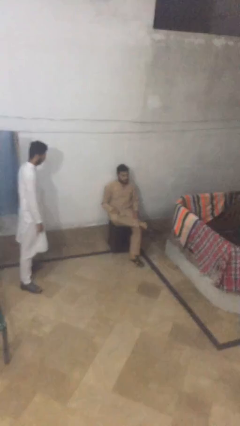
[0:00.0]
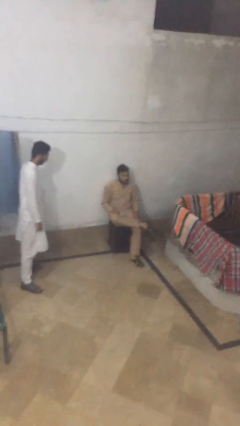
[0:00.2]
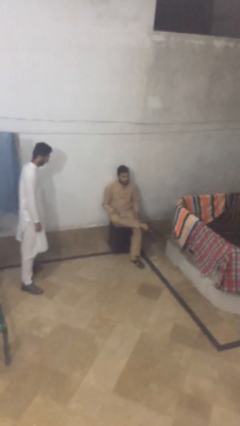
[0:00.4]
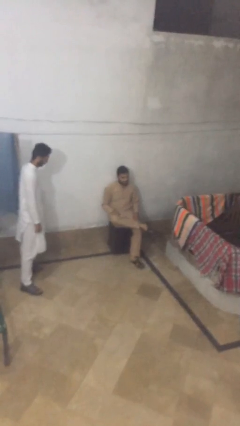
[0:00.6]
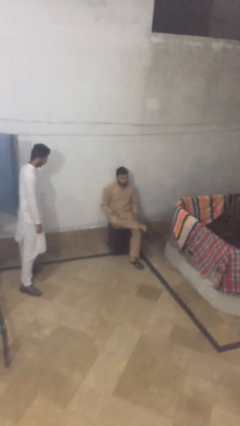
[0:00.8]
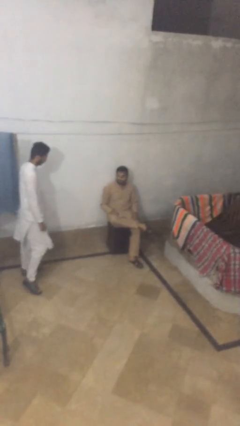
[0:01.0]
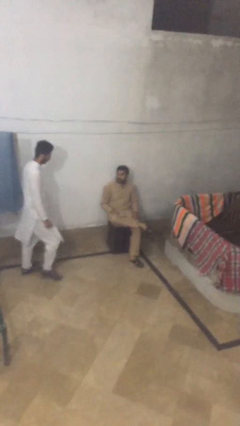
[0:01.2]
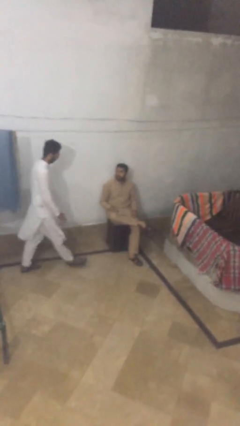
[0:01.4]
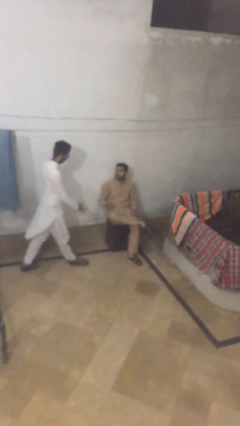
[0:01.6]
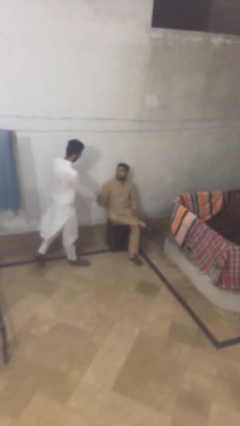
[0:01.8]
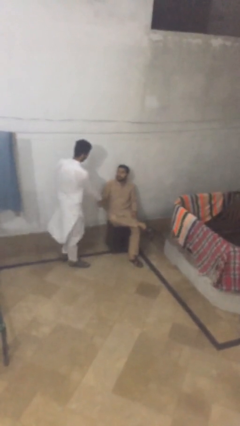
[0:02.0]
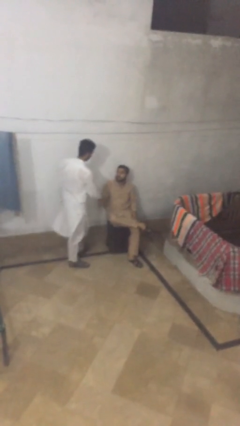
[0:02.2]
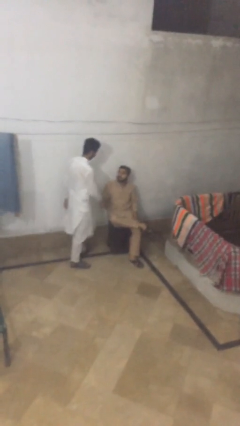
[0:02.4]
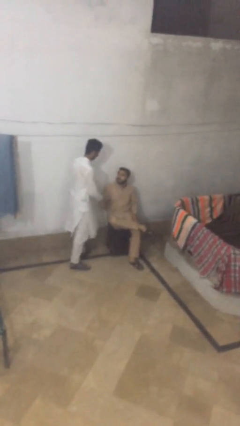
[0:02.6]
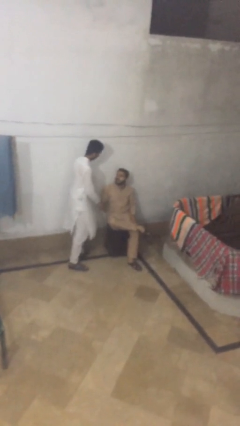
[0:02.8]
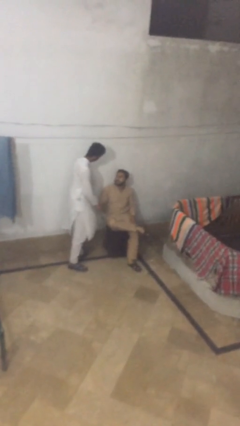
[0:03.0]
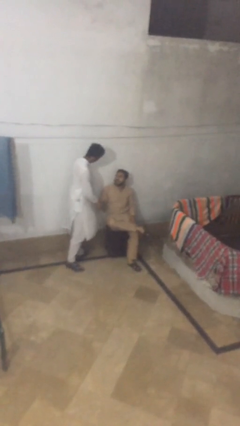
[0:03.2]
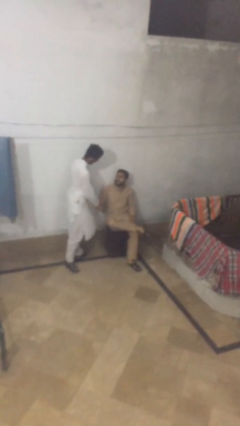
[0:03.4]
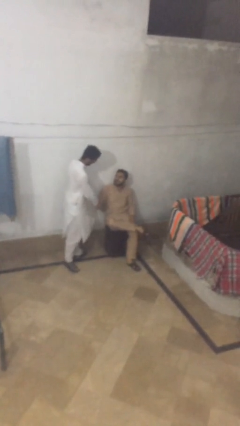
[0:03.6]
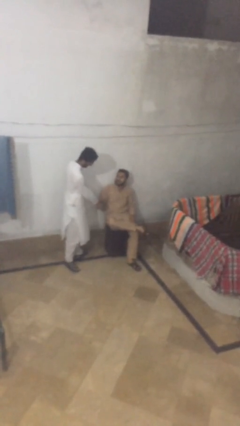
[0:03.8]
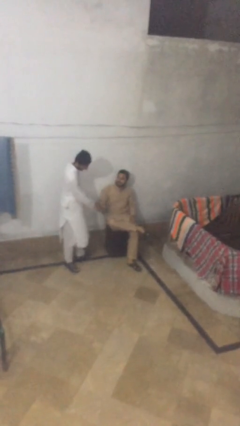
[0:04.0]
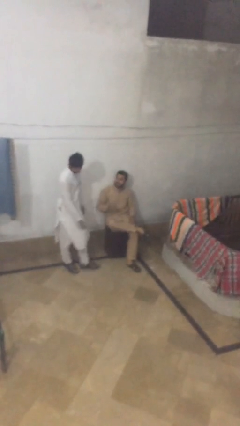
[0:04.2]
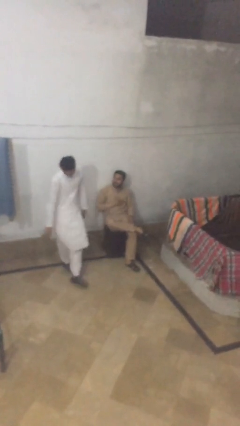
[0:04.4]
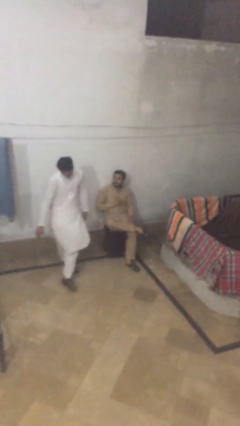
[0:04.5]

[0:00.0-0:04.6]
person shakes hand

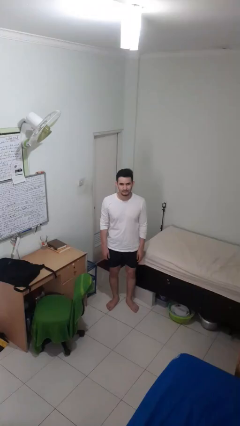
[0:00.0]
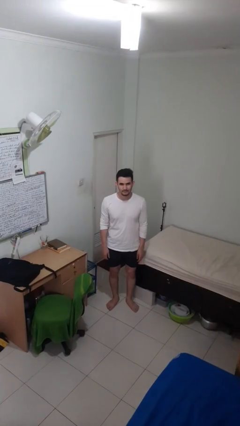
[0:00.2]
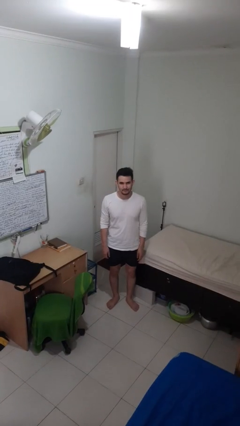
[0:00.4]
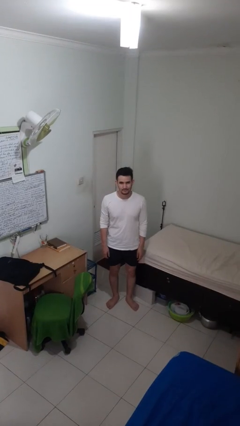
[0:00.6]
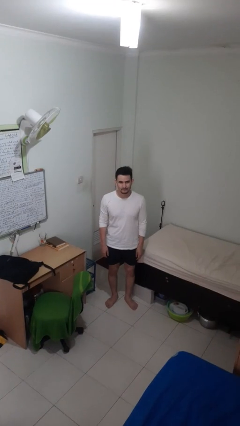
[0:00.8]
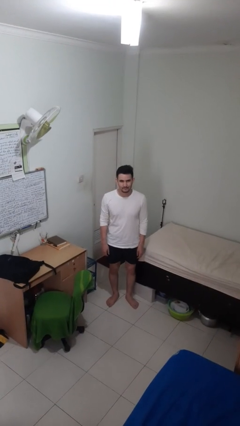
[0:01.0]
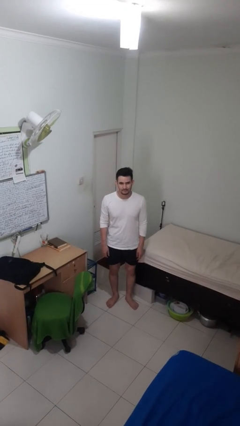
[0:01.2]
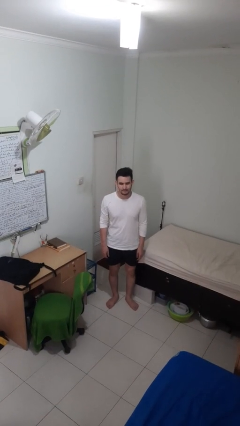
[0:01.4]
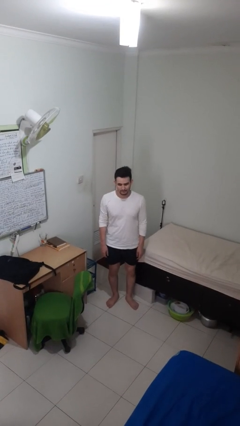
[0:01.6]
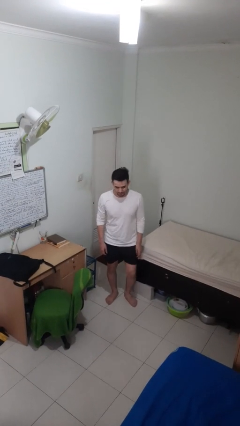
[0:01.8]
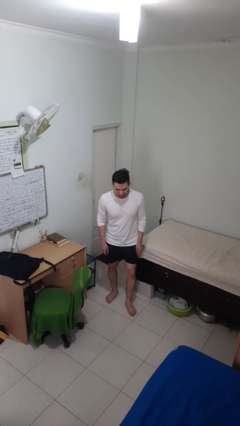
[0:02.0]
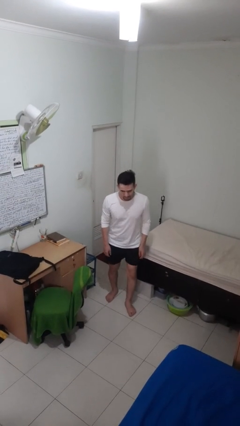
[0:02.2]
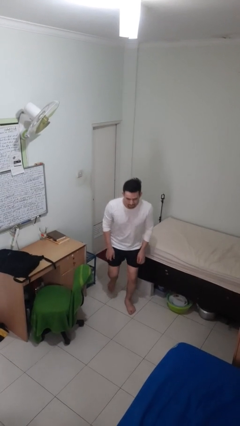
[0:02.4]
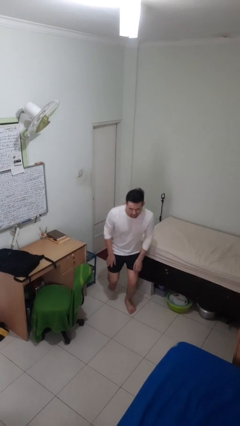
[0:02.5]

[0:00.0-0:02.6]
person kneels

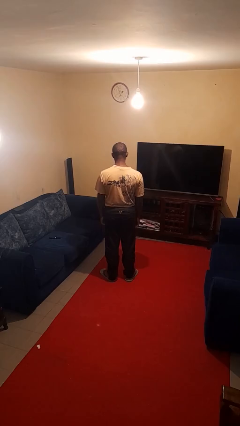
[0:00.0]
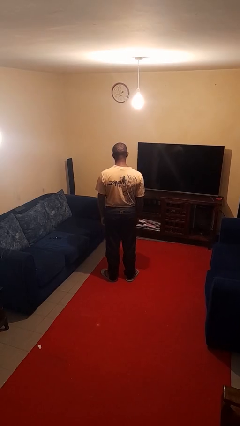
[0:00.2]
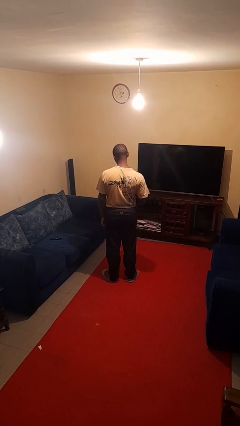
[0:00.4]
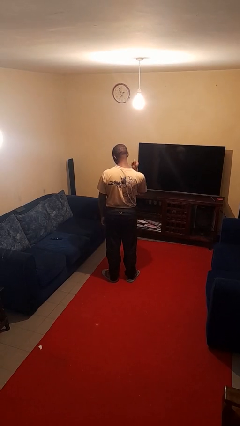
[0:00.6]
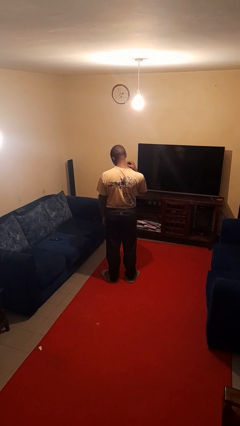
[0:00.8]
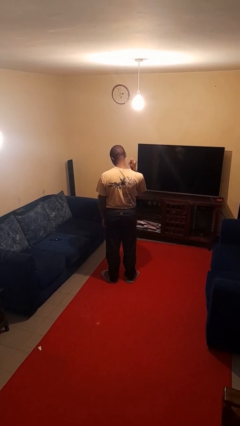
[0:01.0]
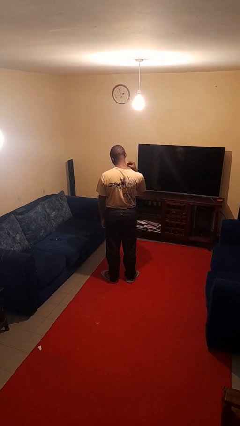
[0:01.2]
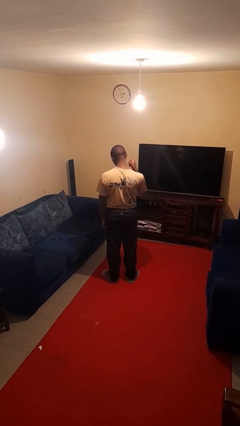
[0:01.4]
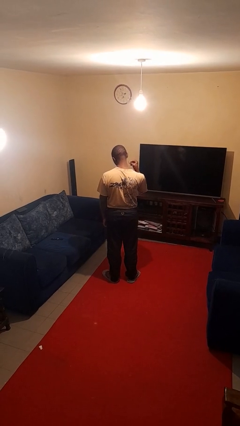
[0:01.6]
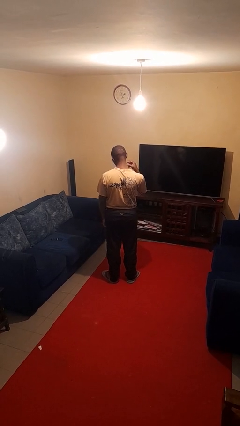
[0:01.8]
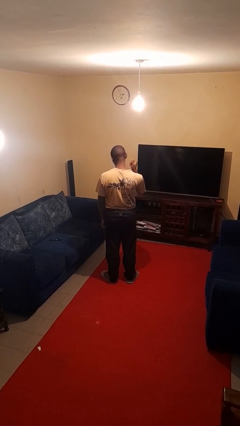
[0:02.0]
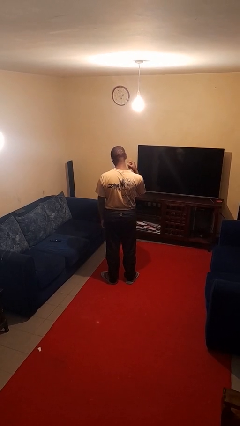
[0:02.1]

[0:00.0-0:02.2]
person snaps fingers

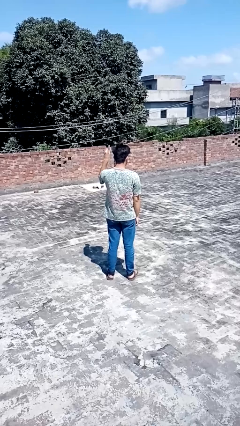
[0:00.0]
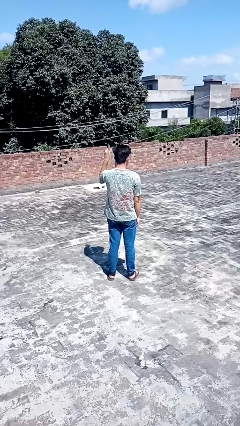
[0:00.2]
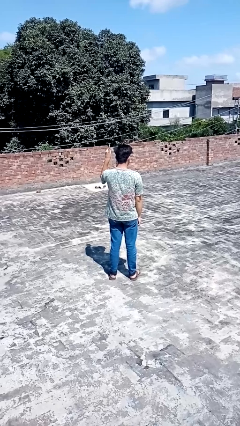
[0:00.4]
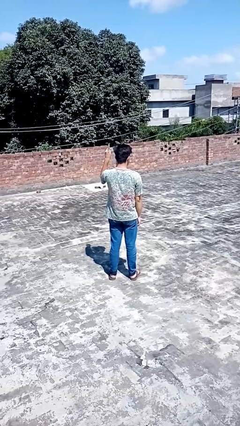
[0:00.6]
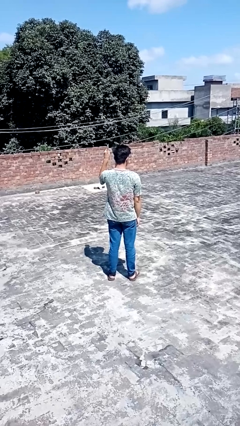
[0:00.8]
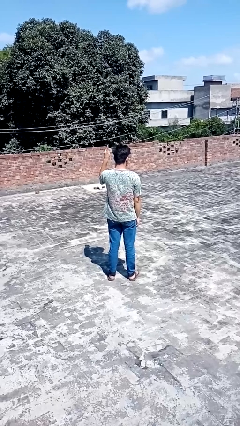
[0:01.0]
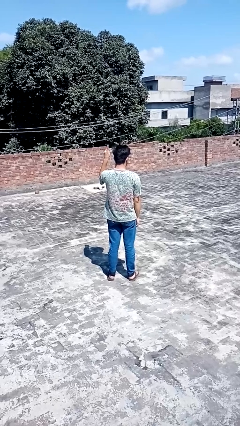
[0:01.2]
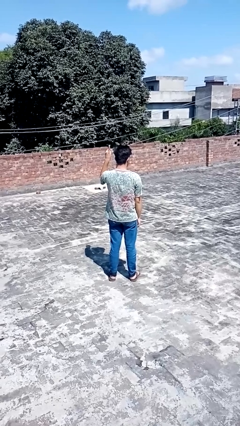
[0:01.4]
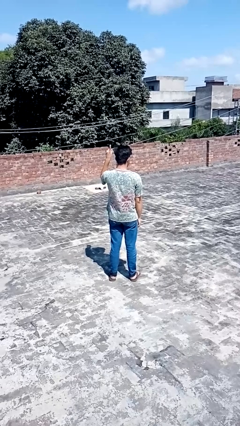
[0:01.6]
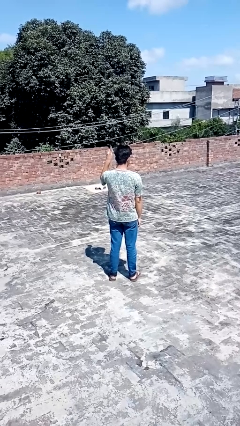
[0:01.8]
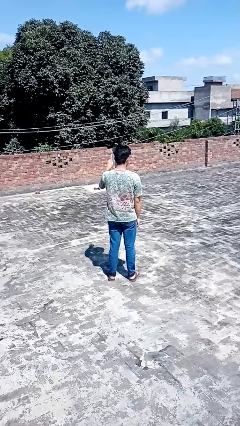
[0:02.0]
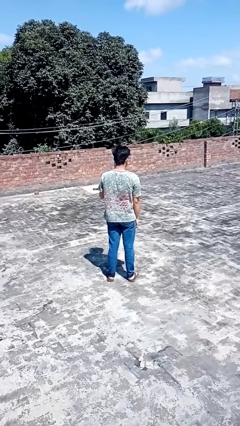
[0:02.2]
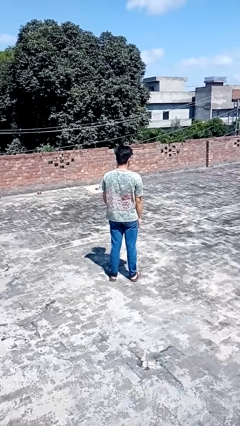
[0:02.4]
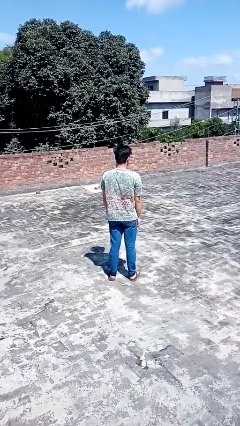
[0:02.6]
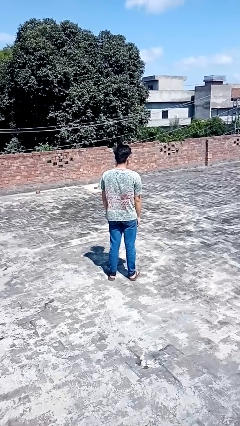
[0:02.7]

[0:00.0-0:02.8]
person gestures number one

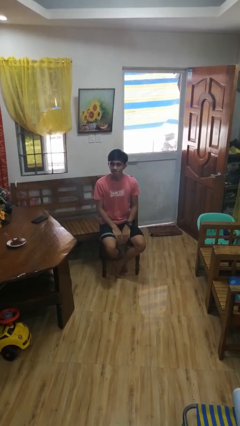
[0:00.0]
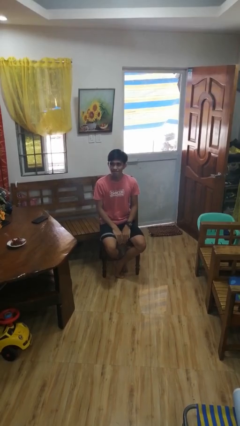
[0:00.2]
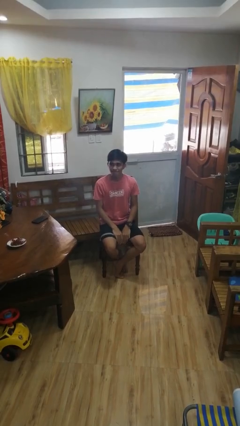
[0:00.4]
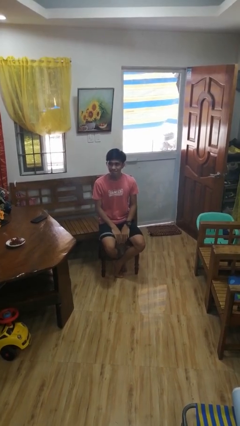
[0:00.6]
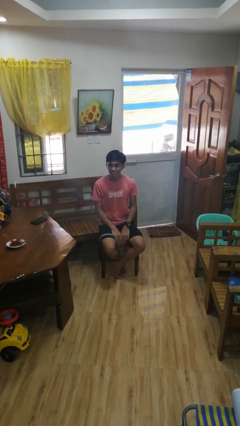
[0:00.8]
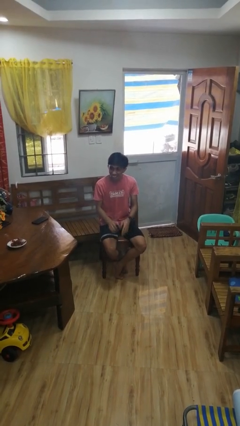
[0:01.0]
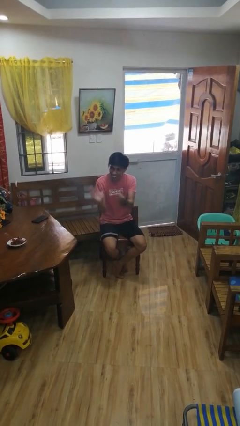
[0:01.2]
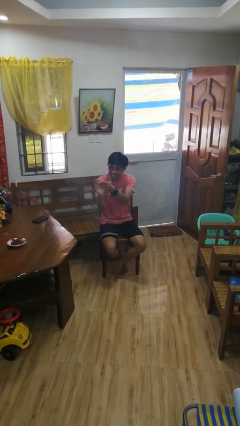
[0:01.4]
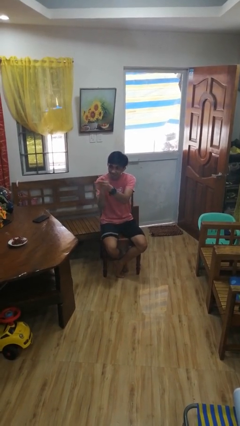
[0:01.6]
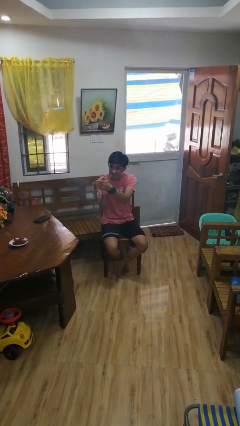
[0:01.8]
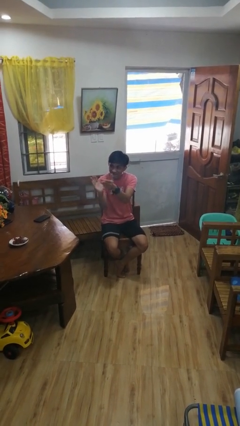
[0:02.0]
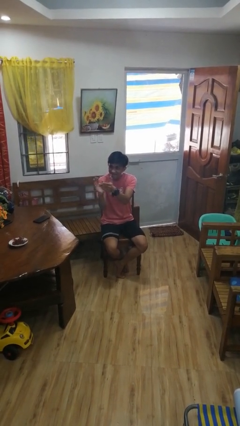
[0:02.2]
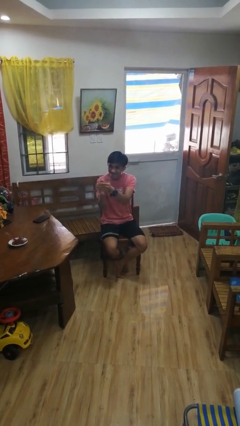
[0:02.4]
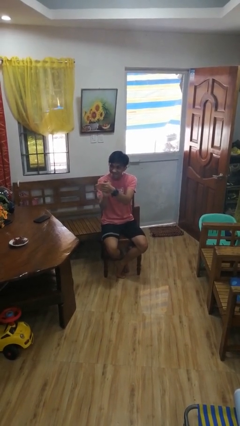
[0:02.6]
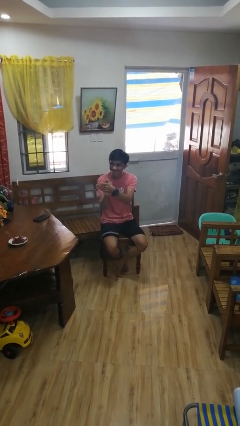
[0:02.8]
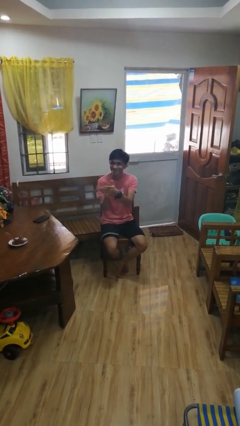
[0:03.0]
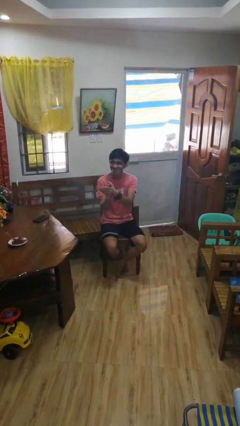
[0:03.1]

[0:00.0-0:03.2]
person claps hands

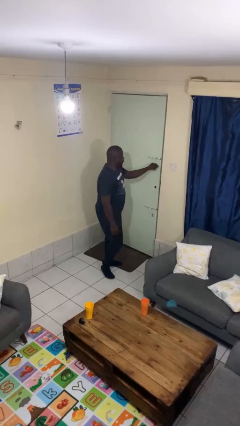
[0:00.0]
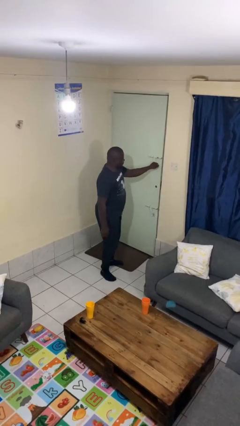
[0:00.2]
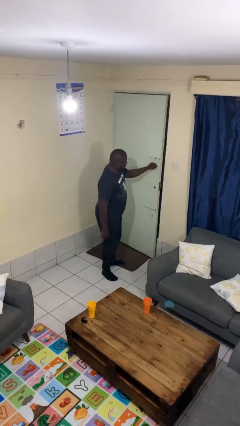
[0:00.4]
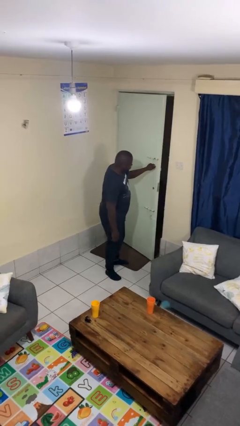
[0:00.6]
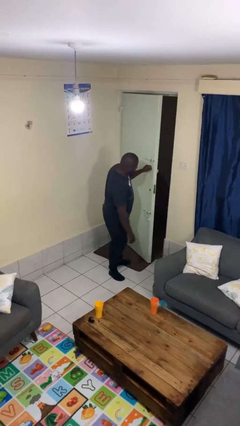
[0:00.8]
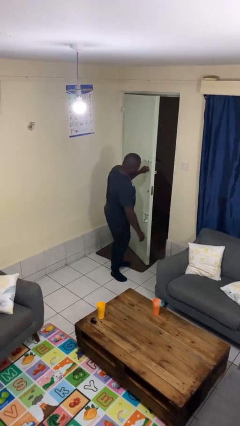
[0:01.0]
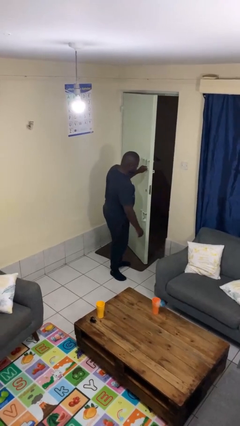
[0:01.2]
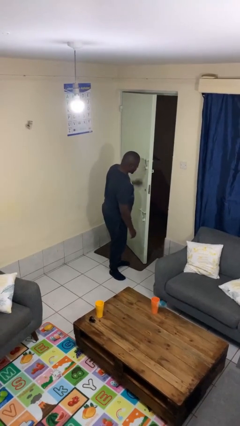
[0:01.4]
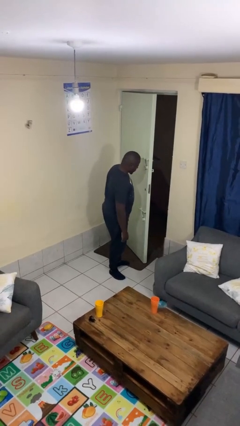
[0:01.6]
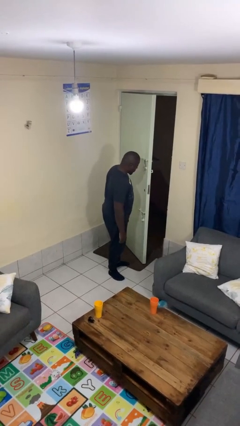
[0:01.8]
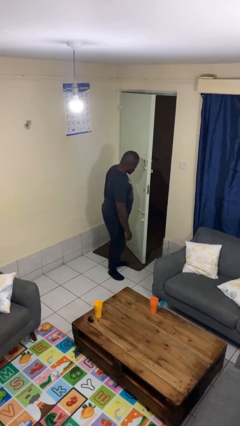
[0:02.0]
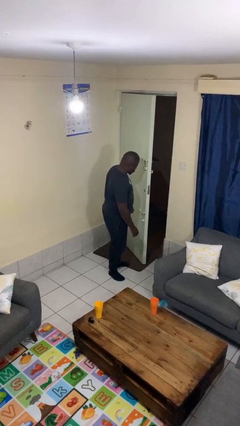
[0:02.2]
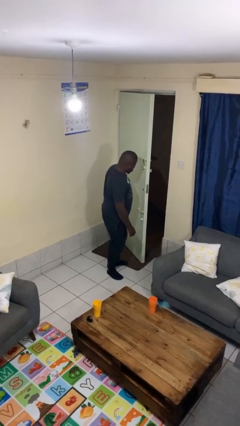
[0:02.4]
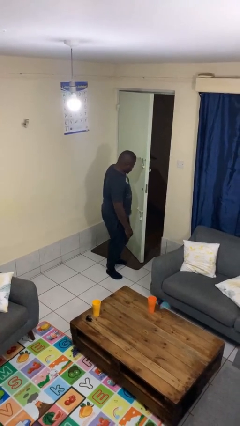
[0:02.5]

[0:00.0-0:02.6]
person opens facility door
